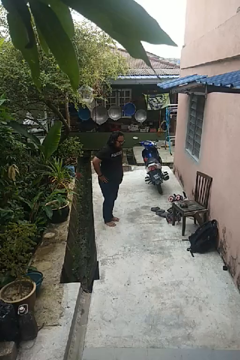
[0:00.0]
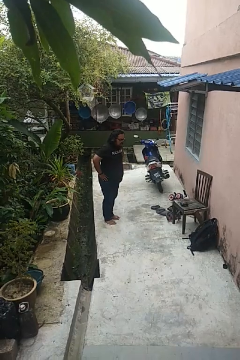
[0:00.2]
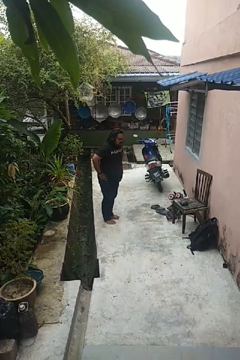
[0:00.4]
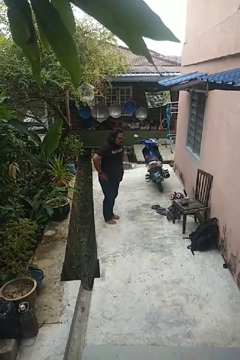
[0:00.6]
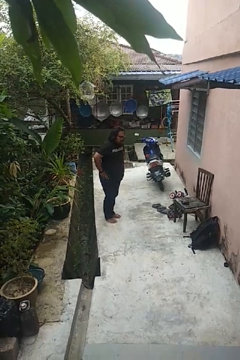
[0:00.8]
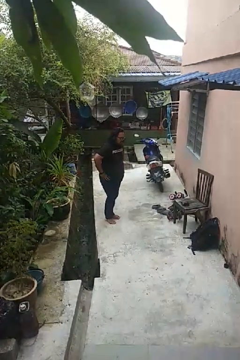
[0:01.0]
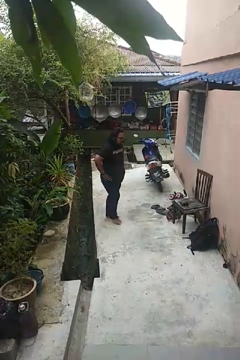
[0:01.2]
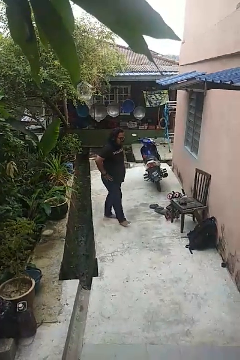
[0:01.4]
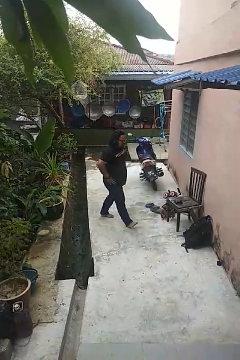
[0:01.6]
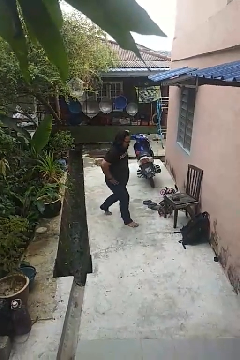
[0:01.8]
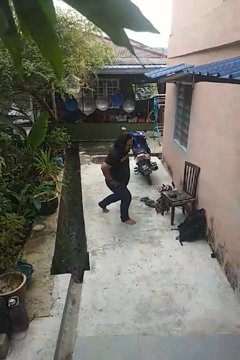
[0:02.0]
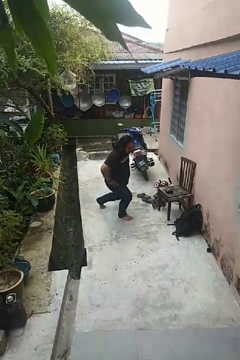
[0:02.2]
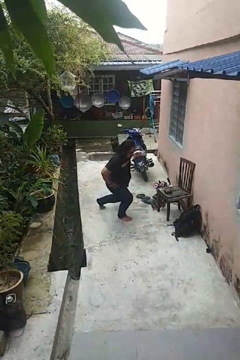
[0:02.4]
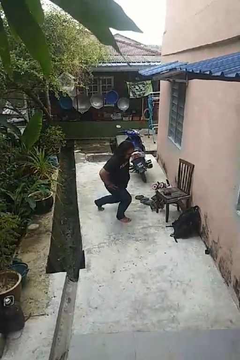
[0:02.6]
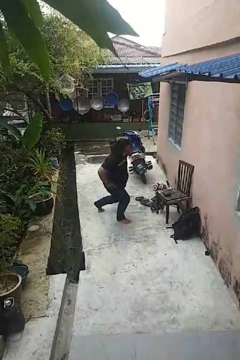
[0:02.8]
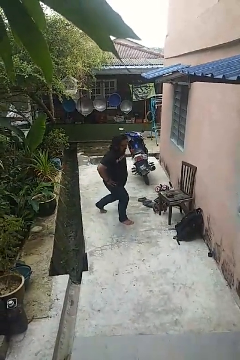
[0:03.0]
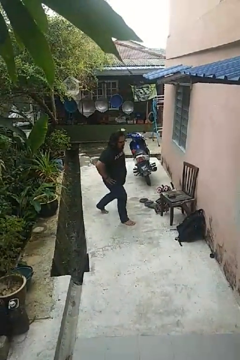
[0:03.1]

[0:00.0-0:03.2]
person exercises with lunges

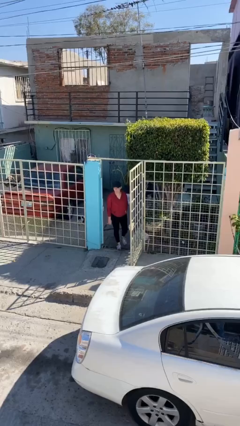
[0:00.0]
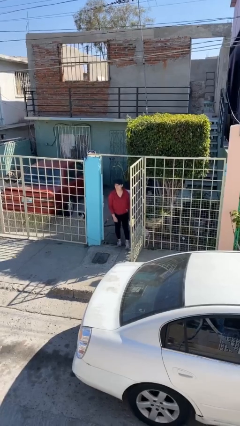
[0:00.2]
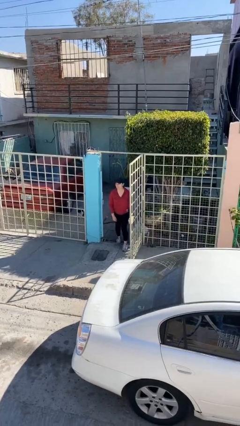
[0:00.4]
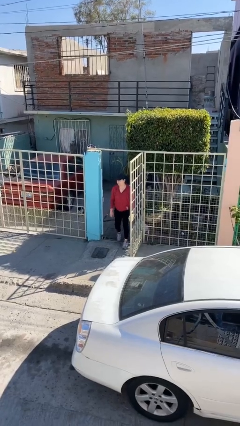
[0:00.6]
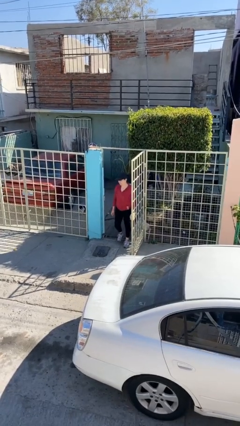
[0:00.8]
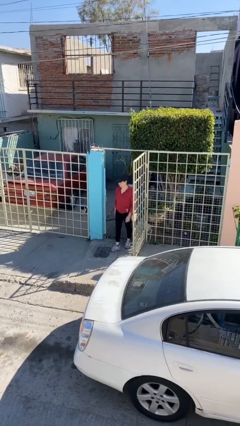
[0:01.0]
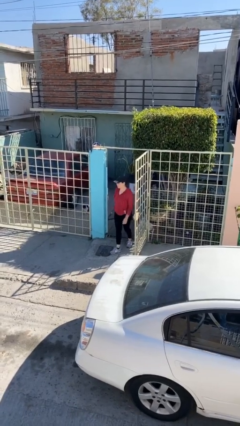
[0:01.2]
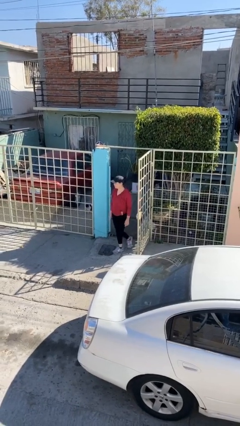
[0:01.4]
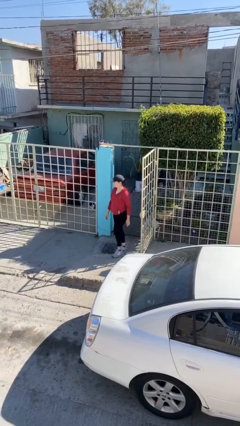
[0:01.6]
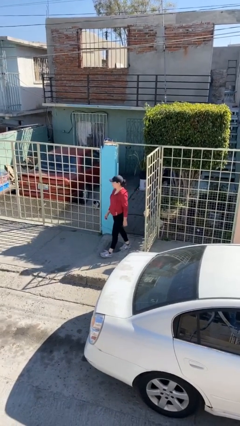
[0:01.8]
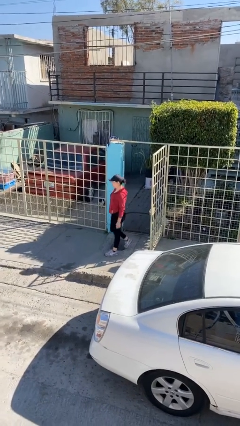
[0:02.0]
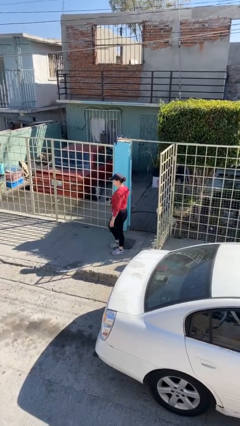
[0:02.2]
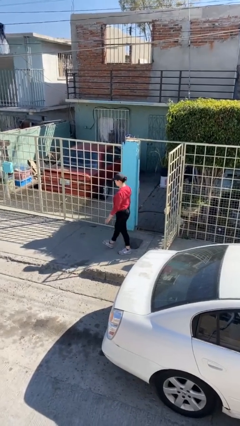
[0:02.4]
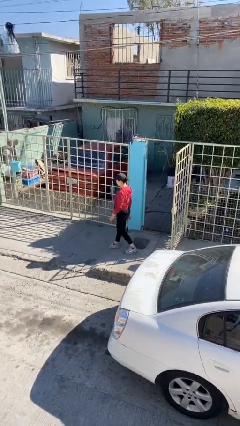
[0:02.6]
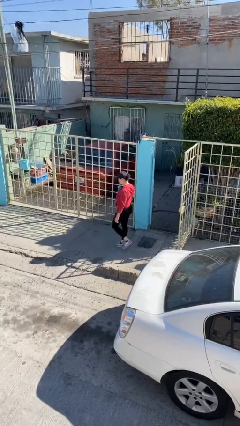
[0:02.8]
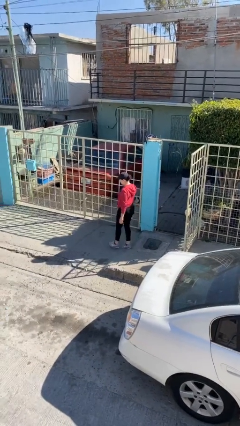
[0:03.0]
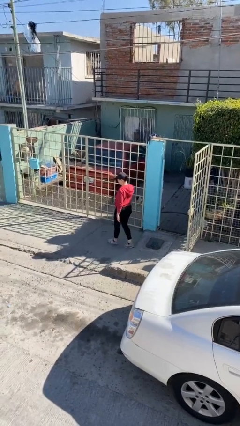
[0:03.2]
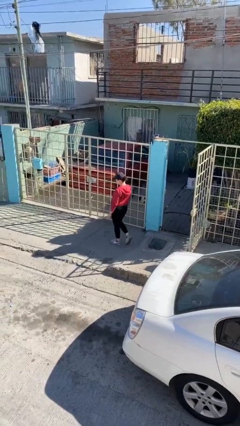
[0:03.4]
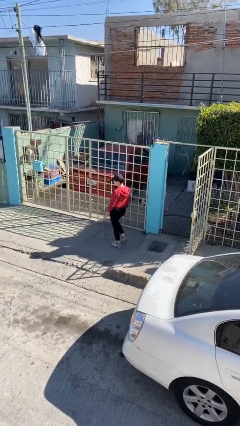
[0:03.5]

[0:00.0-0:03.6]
person enters scene through structure

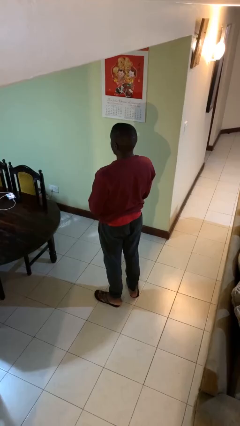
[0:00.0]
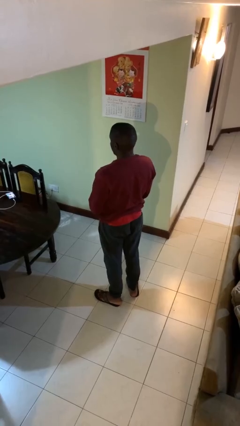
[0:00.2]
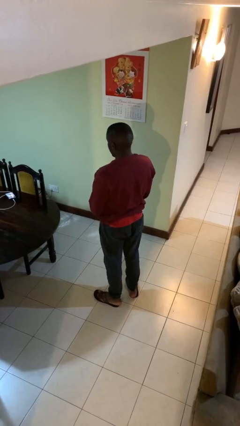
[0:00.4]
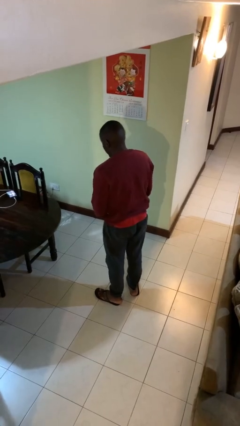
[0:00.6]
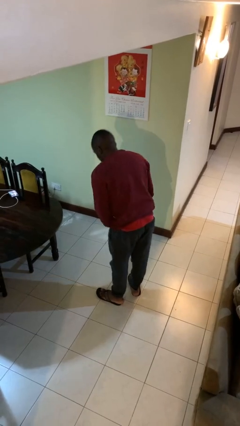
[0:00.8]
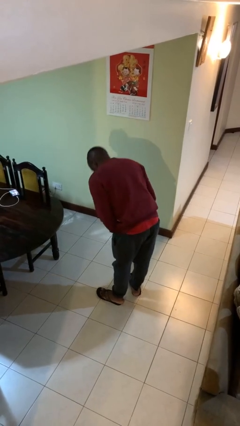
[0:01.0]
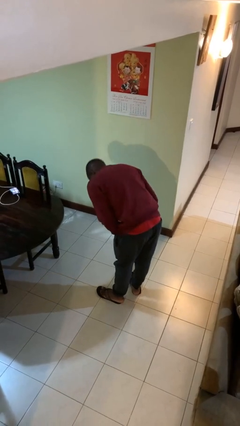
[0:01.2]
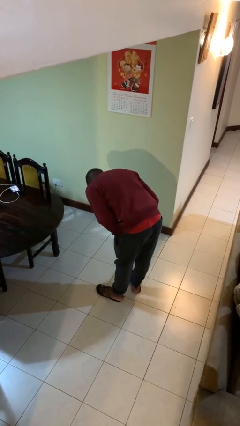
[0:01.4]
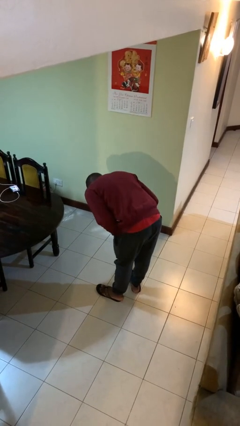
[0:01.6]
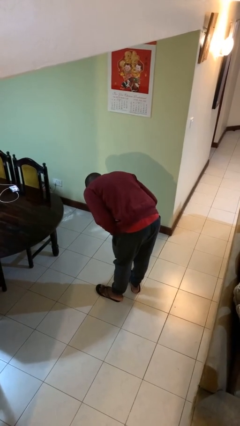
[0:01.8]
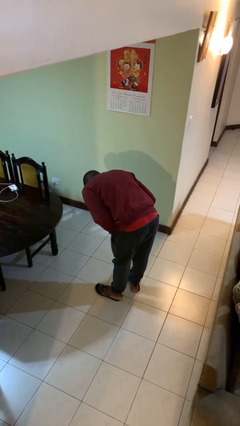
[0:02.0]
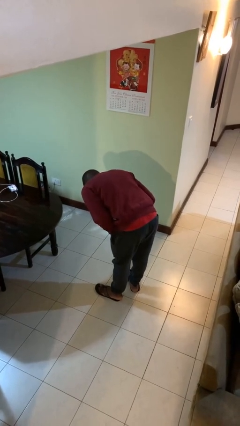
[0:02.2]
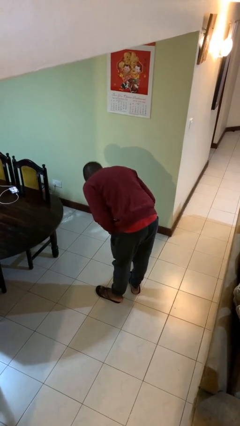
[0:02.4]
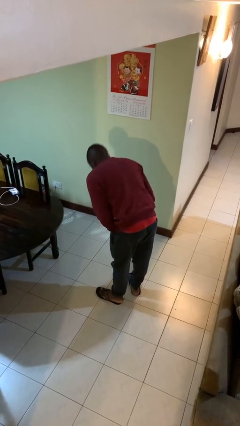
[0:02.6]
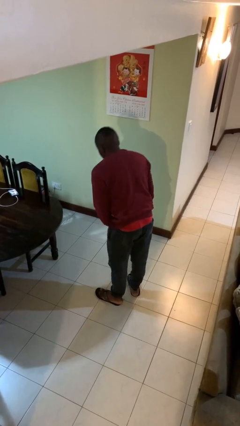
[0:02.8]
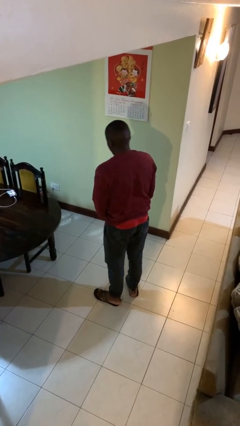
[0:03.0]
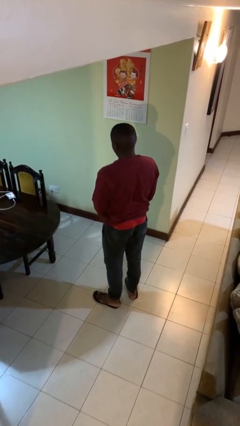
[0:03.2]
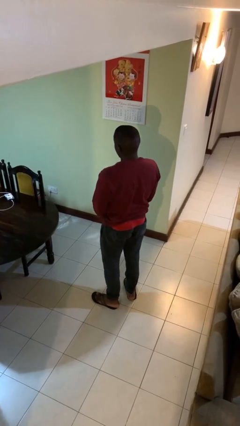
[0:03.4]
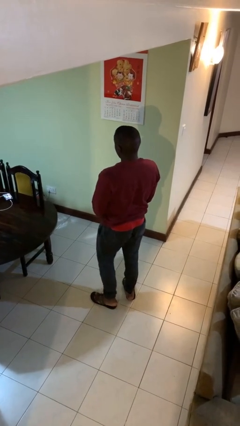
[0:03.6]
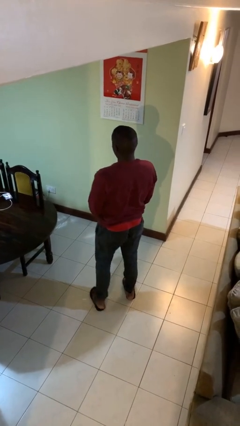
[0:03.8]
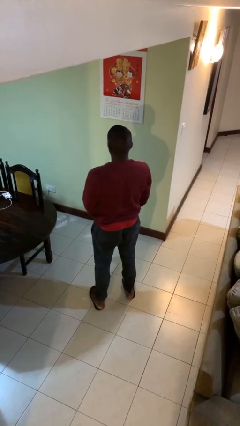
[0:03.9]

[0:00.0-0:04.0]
person bows

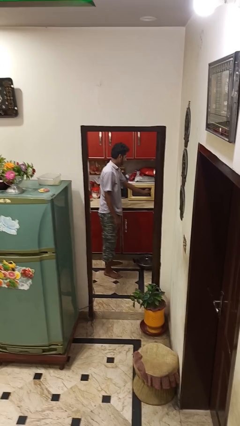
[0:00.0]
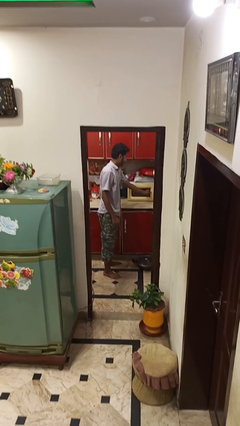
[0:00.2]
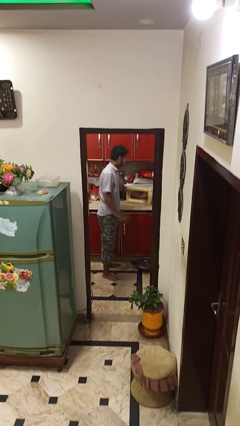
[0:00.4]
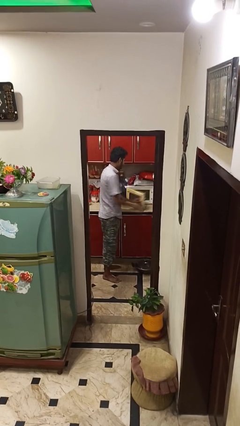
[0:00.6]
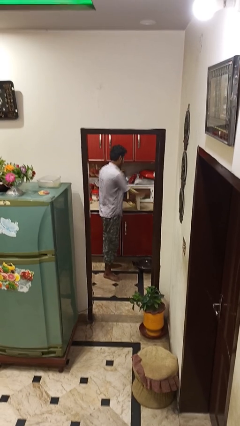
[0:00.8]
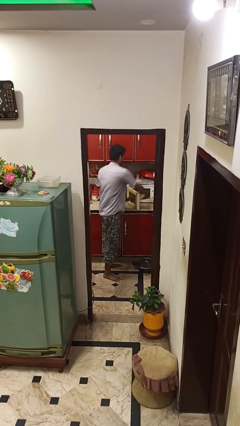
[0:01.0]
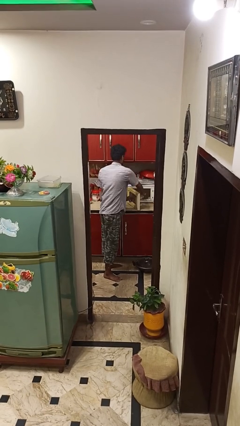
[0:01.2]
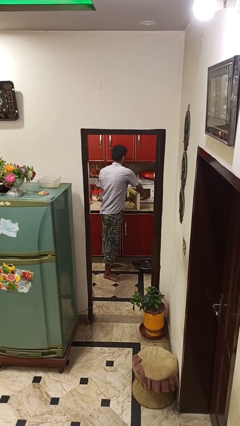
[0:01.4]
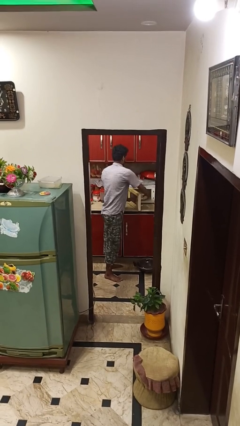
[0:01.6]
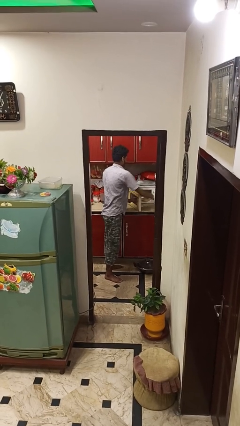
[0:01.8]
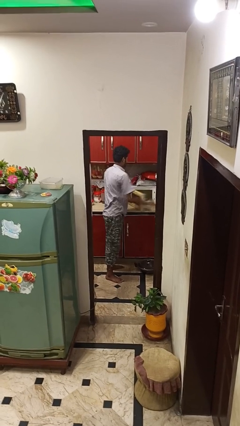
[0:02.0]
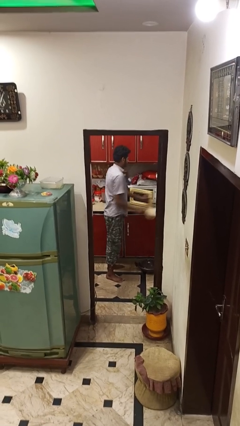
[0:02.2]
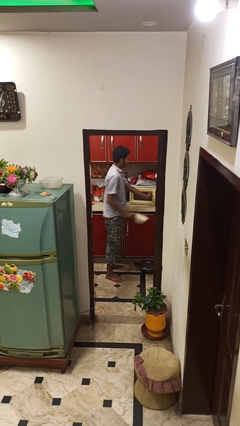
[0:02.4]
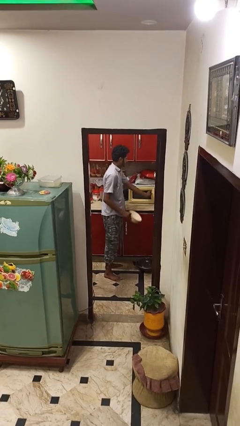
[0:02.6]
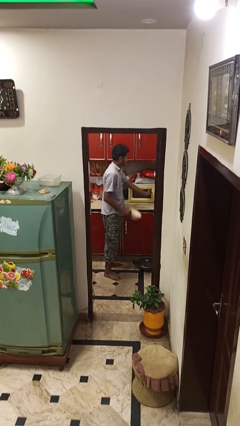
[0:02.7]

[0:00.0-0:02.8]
person takes object from microwave

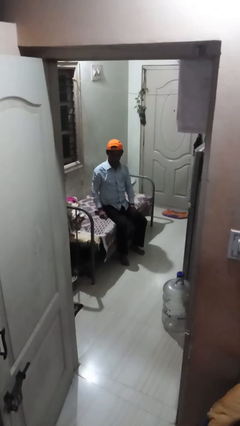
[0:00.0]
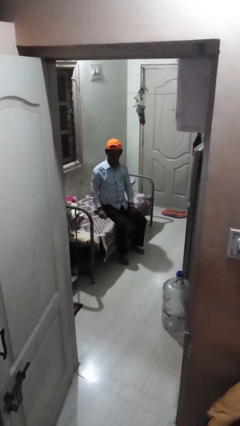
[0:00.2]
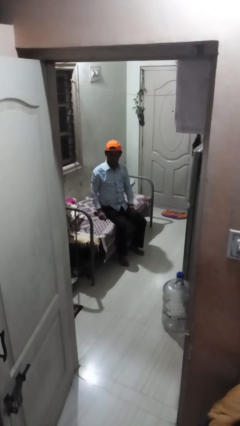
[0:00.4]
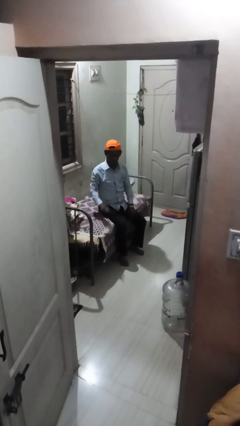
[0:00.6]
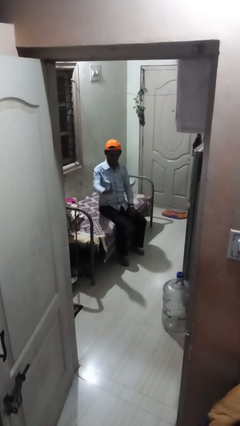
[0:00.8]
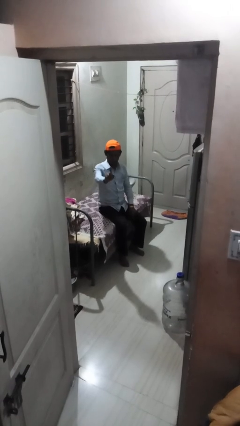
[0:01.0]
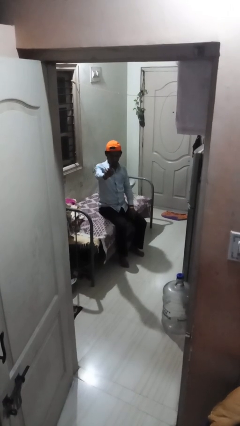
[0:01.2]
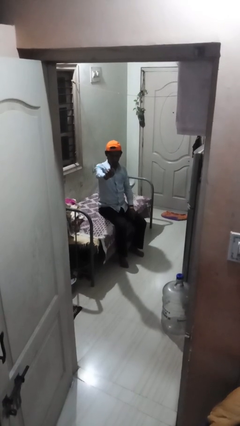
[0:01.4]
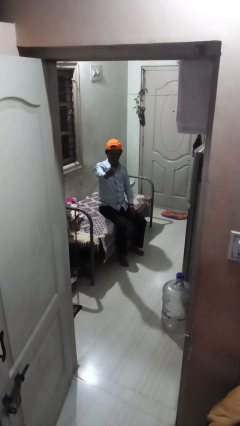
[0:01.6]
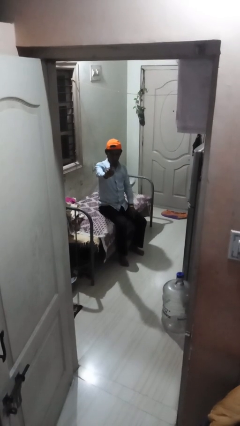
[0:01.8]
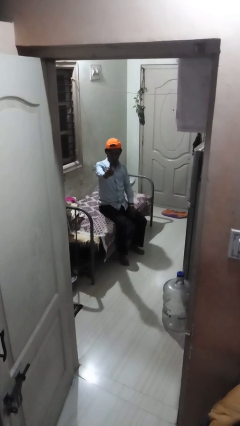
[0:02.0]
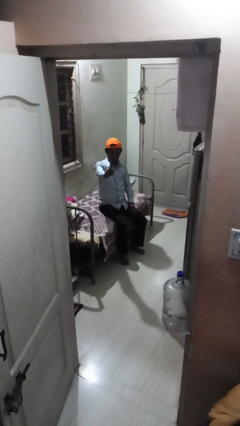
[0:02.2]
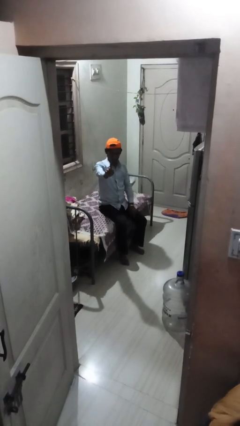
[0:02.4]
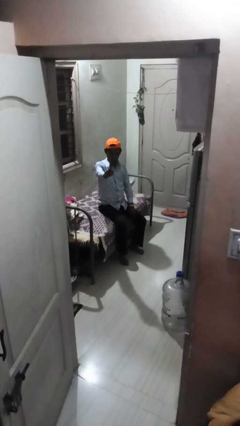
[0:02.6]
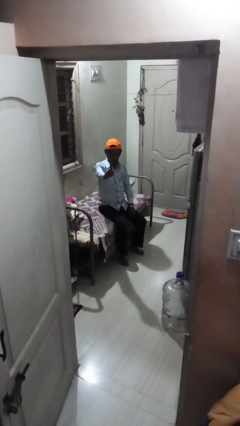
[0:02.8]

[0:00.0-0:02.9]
person gestures number one

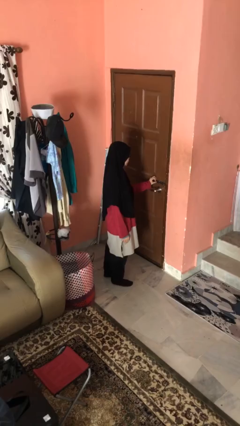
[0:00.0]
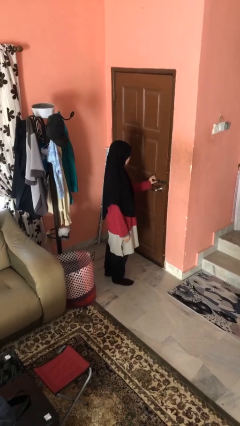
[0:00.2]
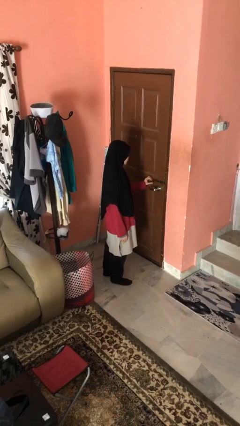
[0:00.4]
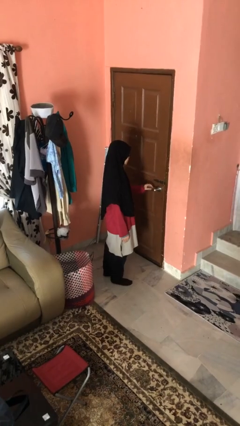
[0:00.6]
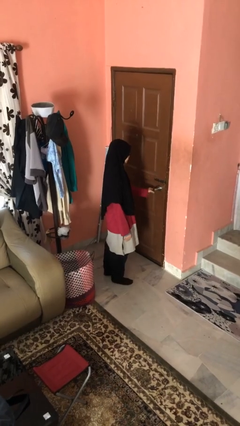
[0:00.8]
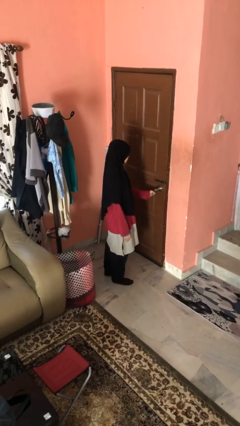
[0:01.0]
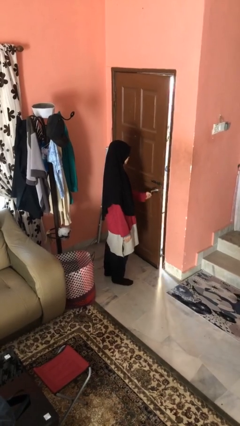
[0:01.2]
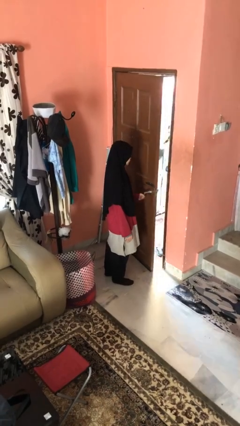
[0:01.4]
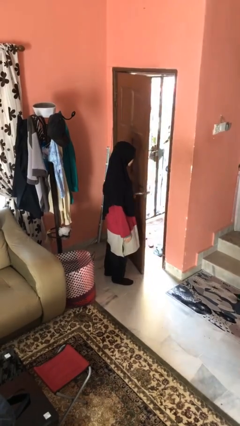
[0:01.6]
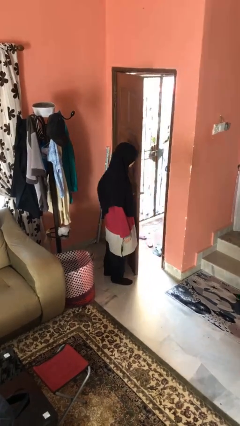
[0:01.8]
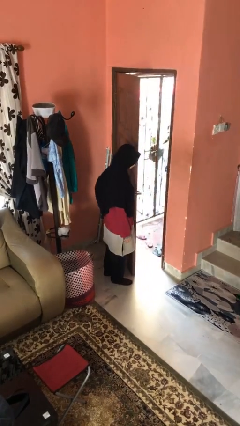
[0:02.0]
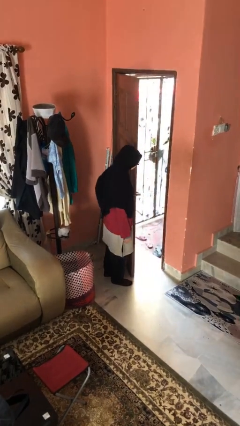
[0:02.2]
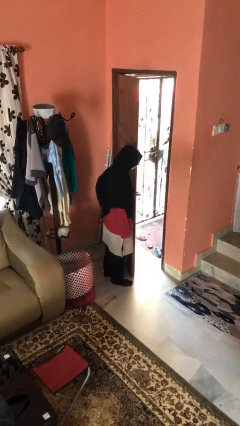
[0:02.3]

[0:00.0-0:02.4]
person opens facility door
